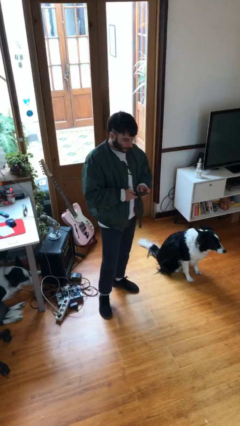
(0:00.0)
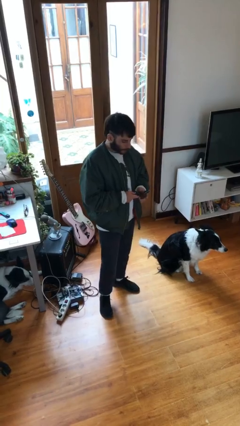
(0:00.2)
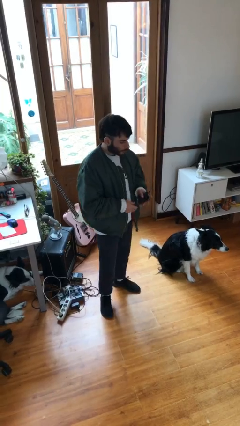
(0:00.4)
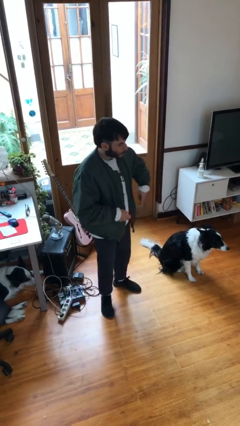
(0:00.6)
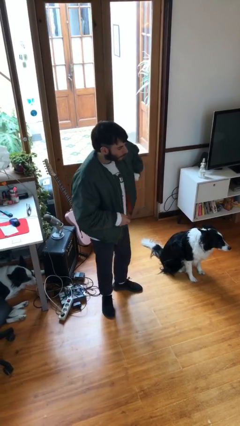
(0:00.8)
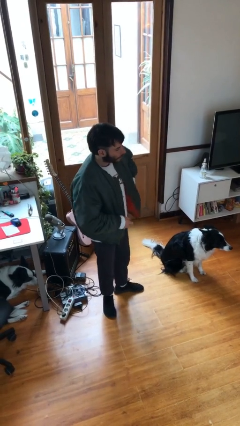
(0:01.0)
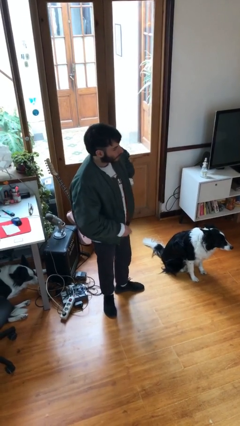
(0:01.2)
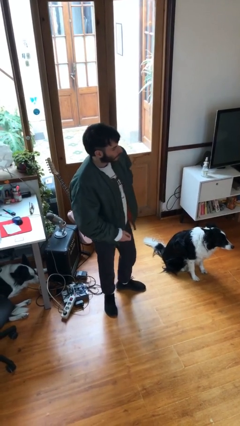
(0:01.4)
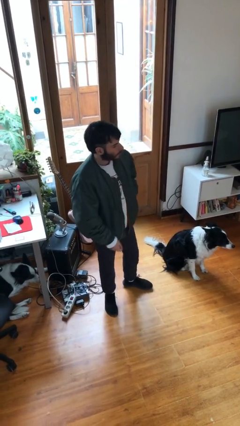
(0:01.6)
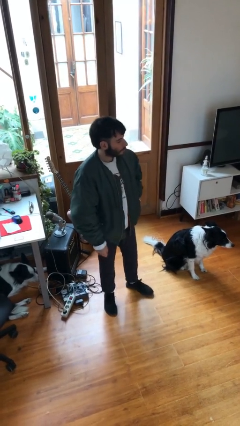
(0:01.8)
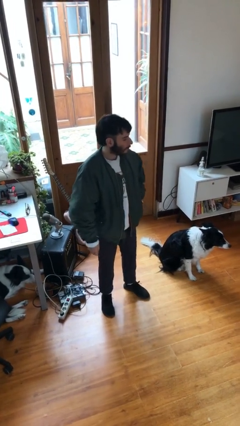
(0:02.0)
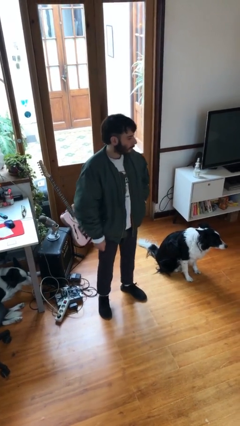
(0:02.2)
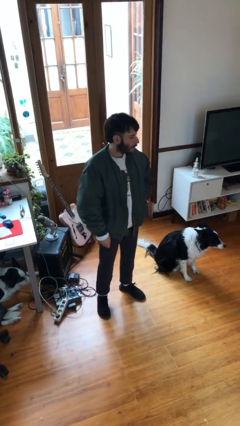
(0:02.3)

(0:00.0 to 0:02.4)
person puts phone into pocket

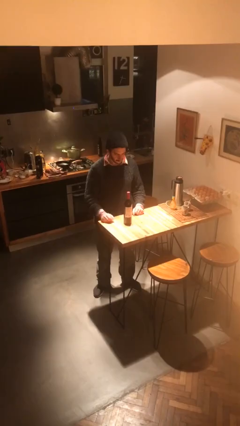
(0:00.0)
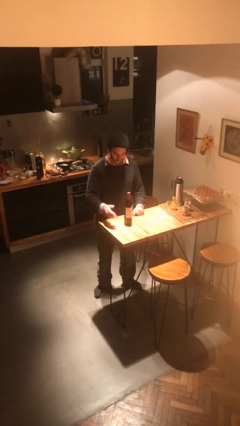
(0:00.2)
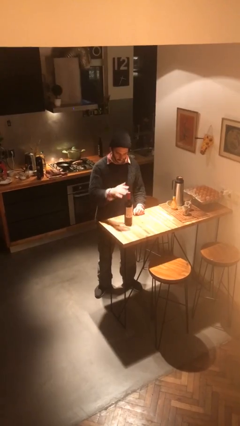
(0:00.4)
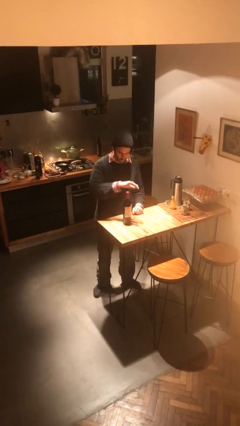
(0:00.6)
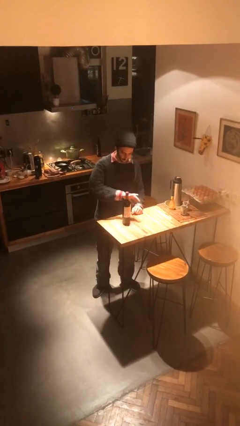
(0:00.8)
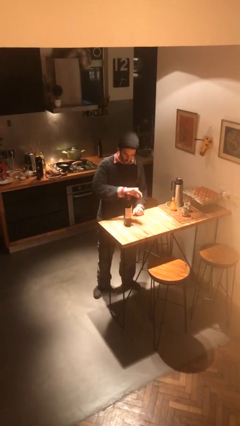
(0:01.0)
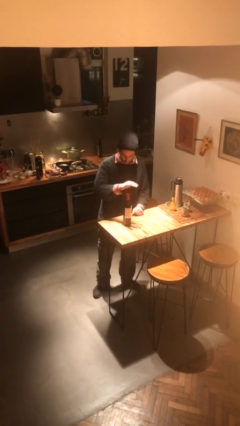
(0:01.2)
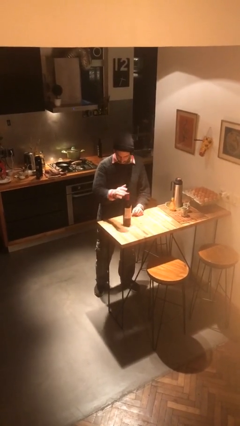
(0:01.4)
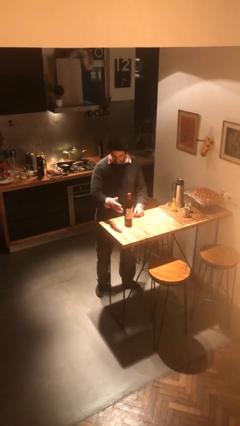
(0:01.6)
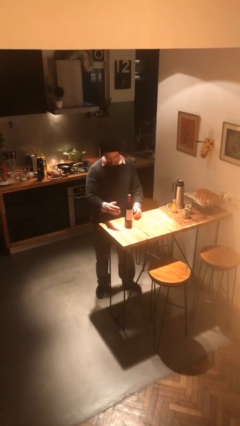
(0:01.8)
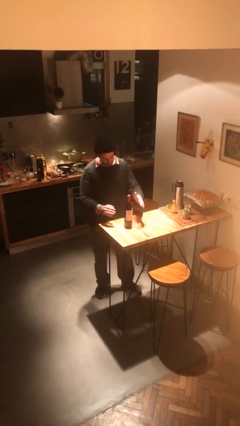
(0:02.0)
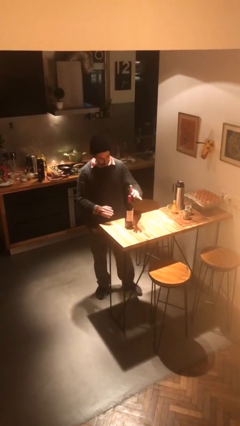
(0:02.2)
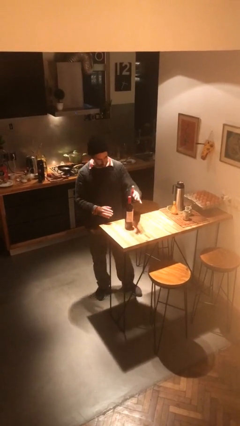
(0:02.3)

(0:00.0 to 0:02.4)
person waves hand over object

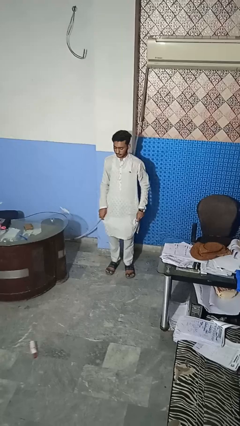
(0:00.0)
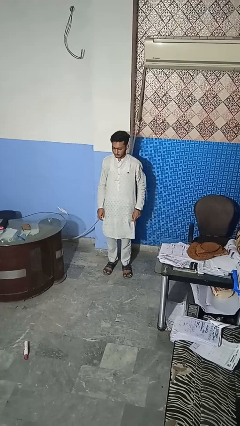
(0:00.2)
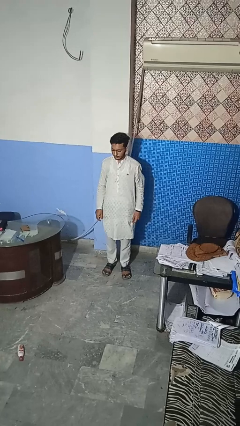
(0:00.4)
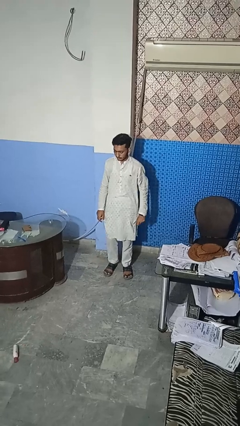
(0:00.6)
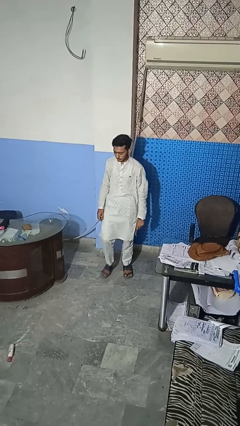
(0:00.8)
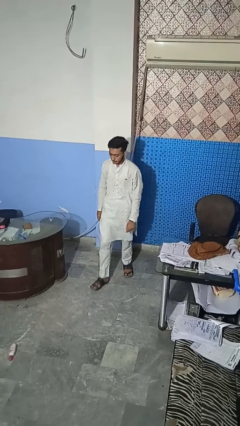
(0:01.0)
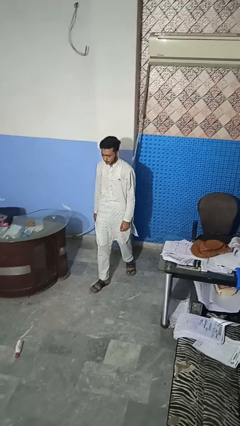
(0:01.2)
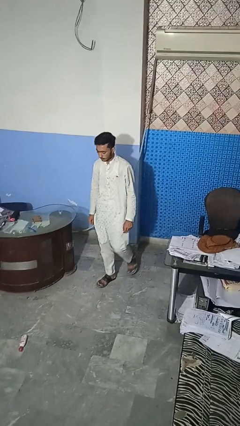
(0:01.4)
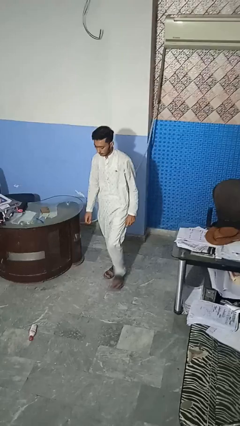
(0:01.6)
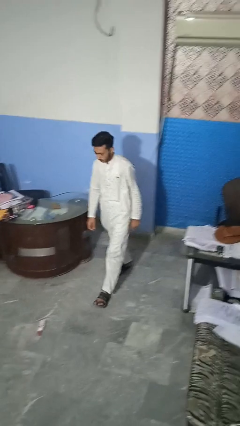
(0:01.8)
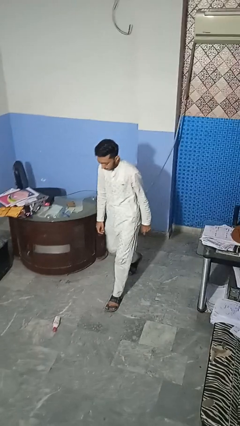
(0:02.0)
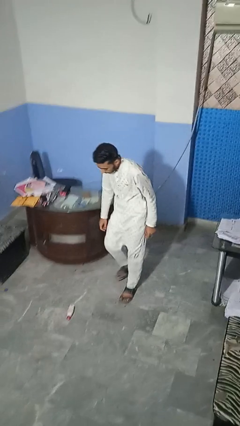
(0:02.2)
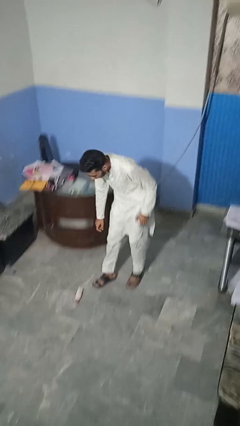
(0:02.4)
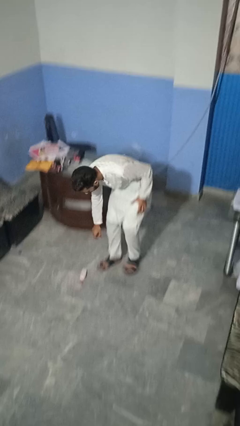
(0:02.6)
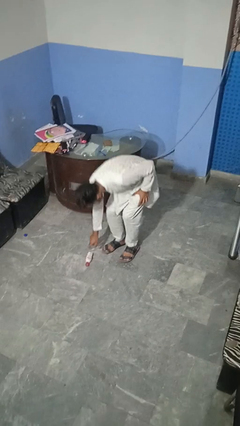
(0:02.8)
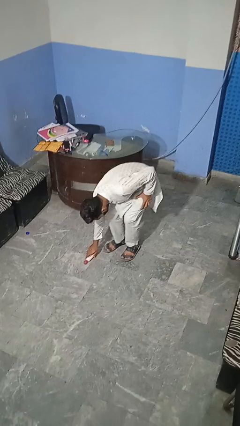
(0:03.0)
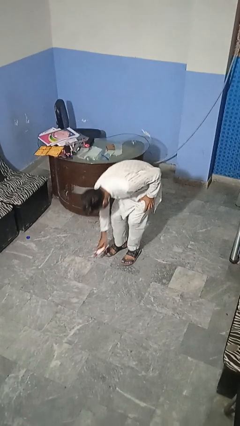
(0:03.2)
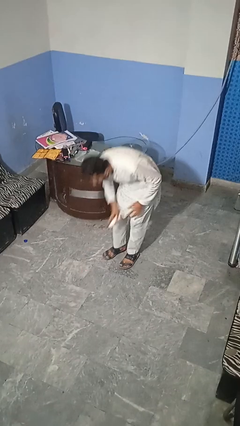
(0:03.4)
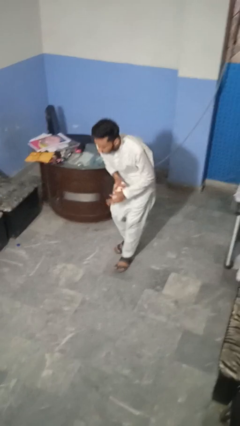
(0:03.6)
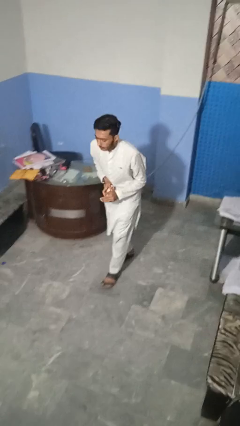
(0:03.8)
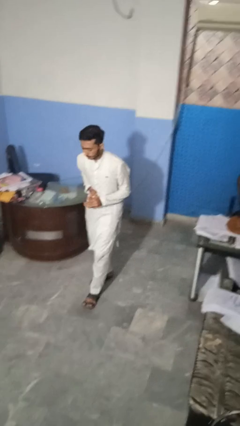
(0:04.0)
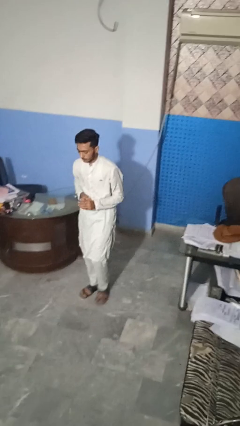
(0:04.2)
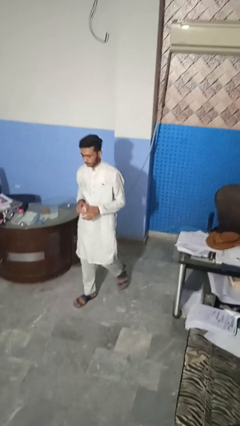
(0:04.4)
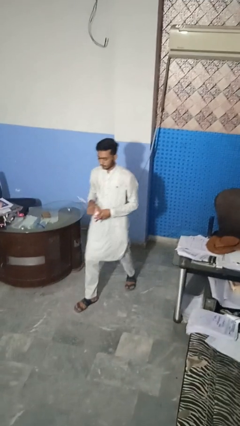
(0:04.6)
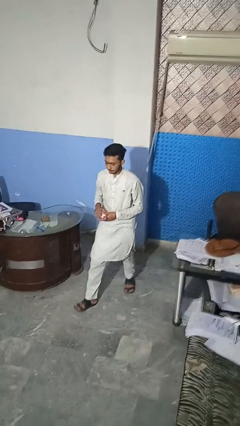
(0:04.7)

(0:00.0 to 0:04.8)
person picks up object from floor

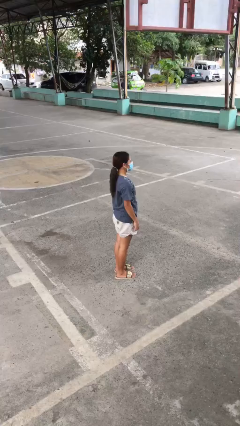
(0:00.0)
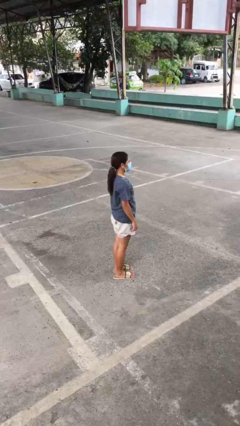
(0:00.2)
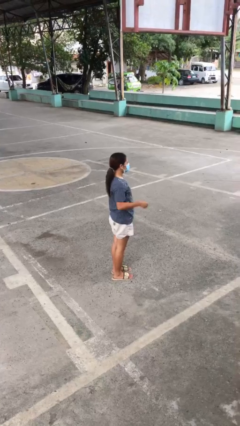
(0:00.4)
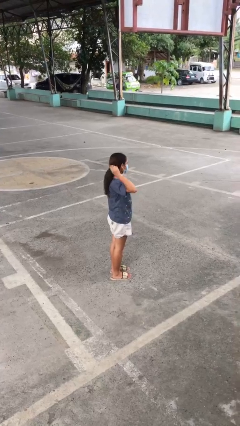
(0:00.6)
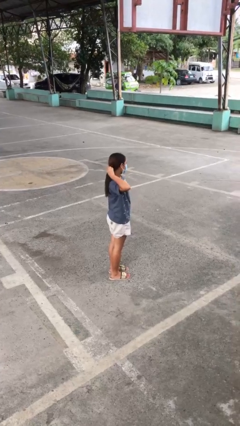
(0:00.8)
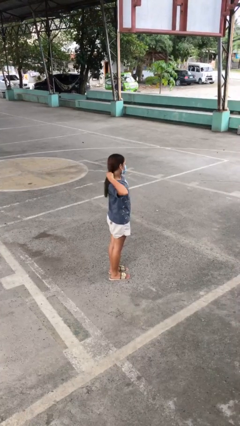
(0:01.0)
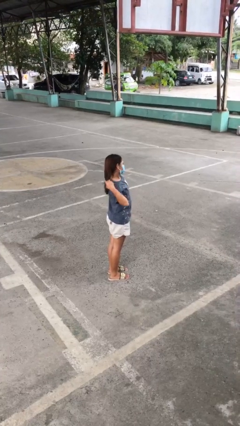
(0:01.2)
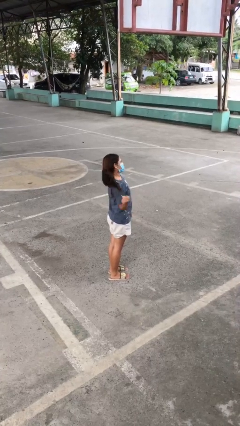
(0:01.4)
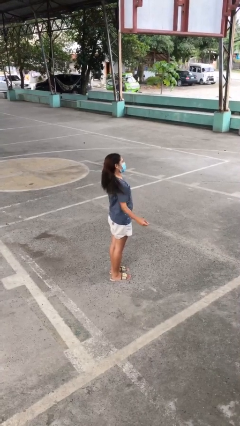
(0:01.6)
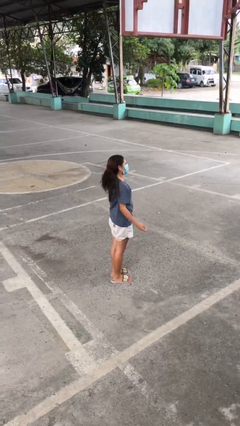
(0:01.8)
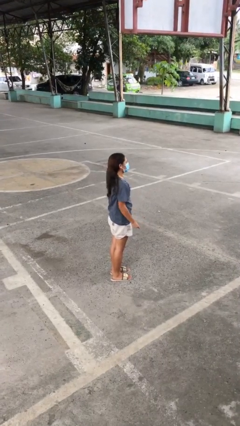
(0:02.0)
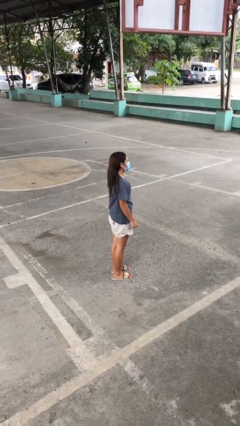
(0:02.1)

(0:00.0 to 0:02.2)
person takes off hairtie

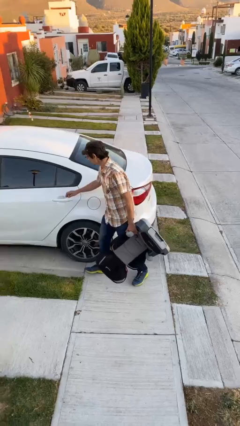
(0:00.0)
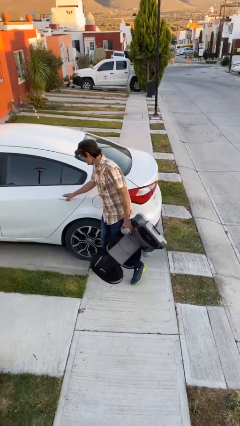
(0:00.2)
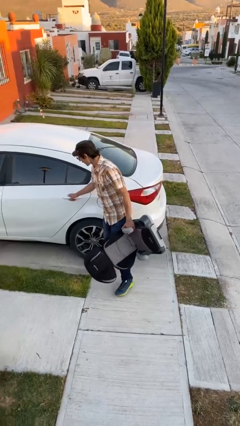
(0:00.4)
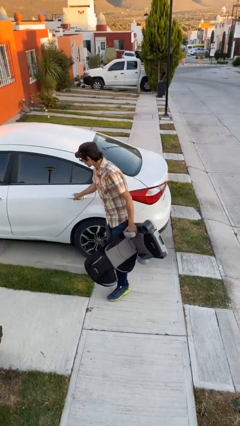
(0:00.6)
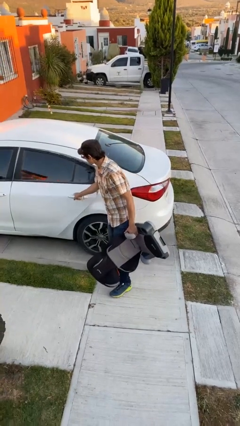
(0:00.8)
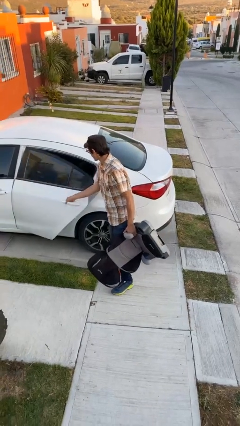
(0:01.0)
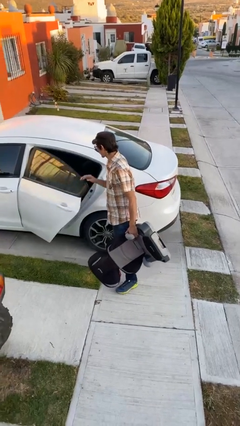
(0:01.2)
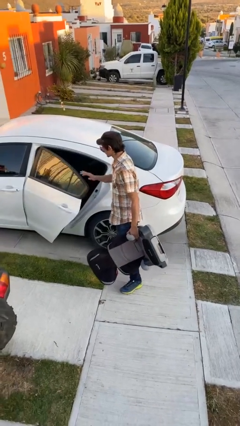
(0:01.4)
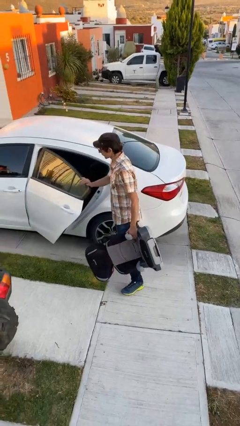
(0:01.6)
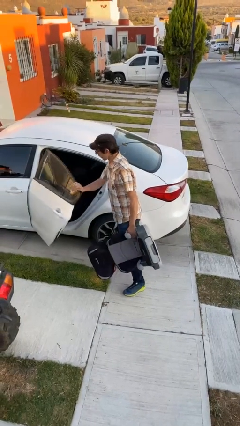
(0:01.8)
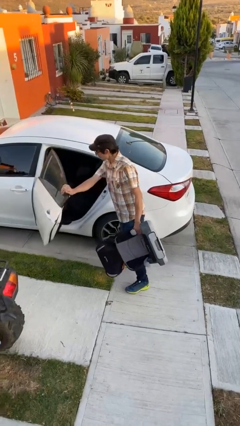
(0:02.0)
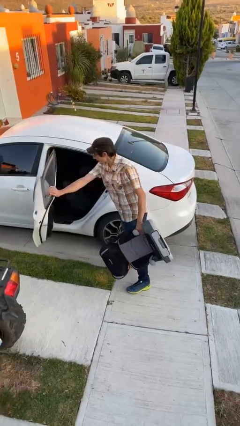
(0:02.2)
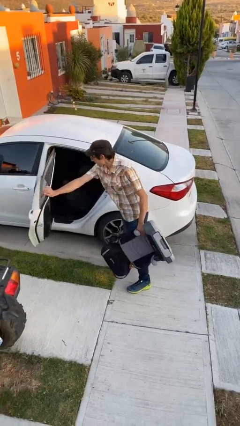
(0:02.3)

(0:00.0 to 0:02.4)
person opens car door

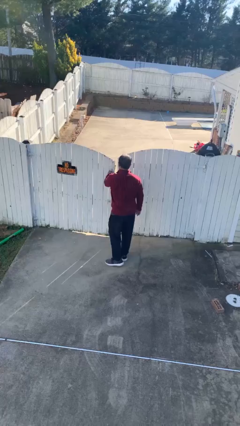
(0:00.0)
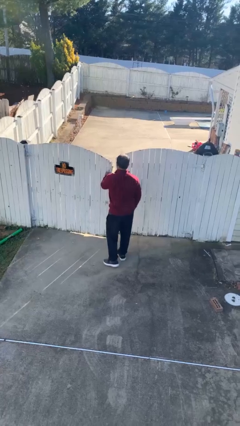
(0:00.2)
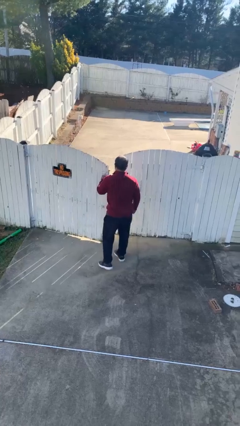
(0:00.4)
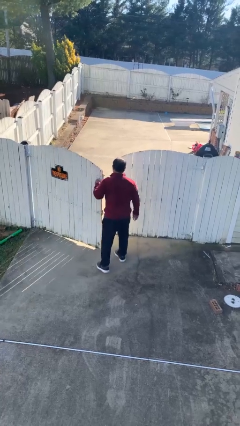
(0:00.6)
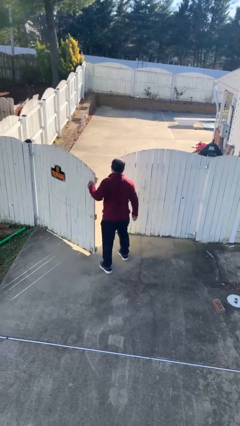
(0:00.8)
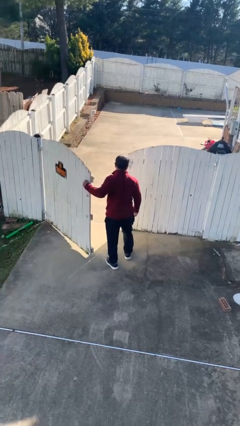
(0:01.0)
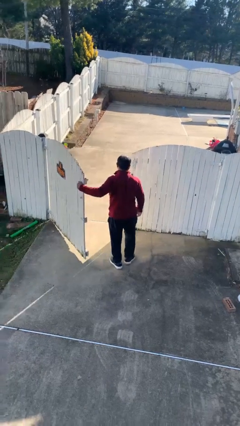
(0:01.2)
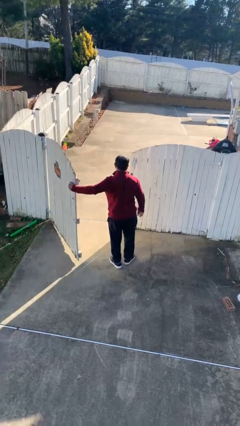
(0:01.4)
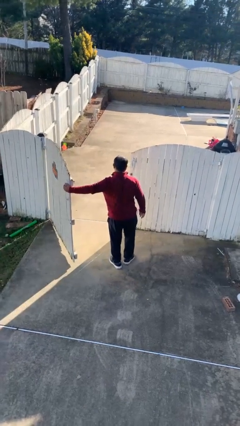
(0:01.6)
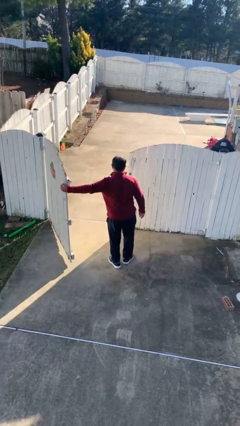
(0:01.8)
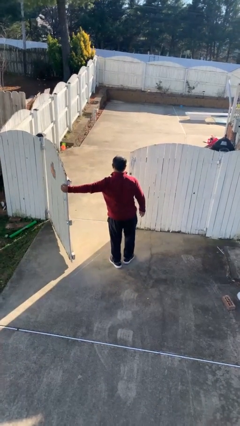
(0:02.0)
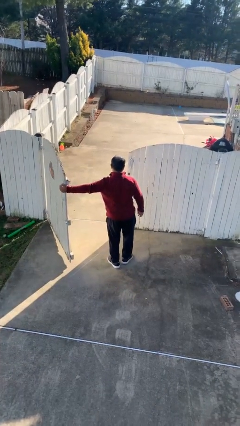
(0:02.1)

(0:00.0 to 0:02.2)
person opens facility door

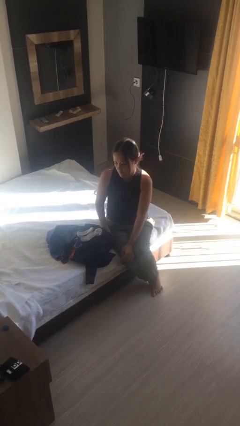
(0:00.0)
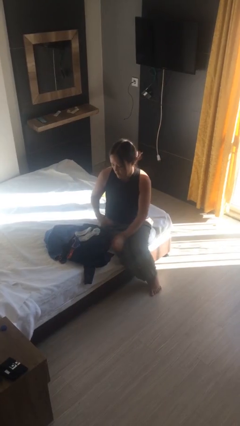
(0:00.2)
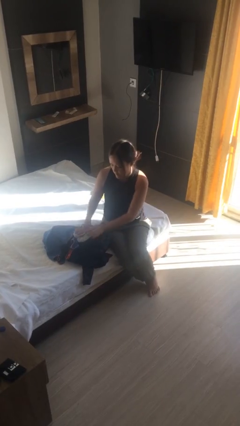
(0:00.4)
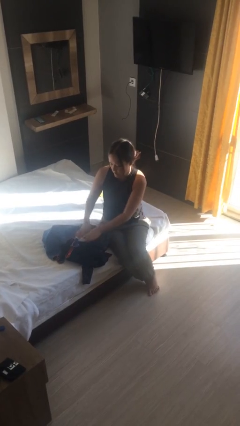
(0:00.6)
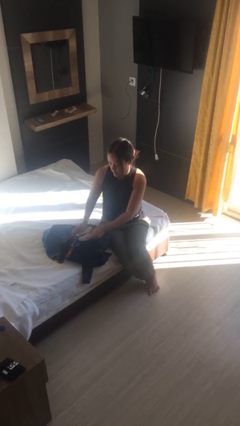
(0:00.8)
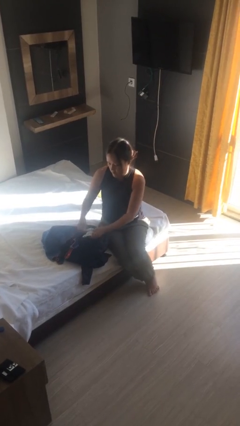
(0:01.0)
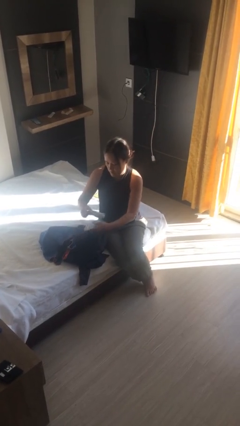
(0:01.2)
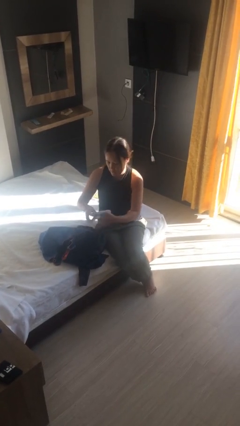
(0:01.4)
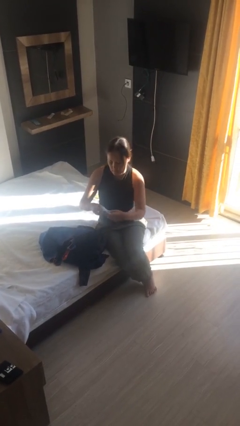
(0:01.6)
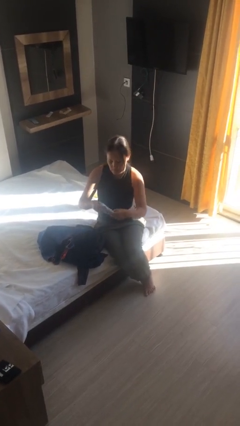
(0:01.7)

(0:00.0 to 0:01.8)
person folds shirt
